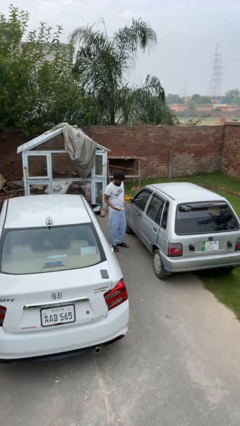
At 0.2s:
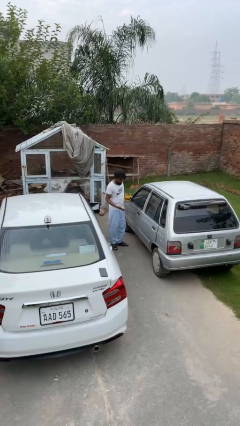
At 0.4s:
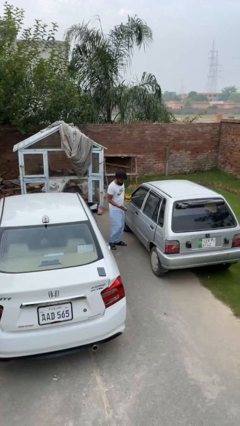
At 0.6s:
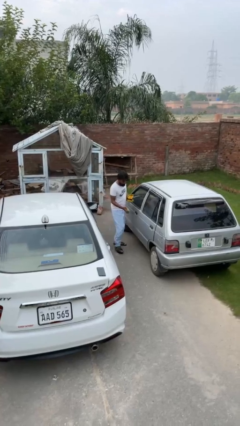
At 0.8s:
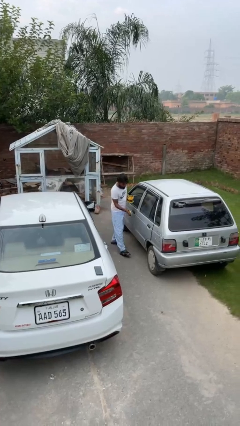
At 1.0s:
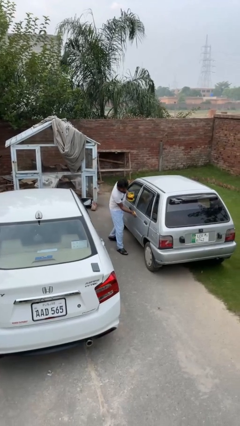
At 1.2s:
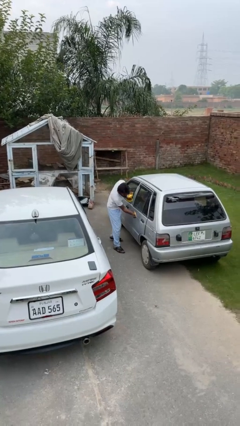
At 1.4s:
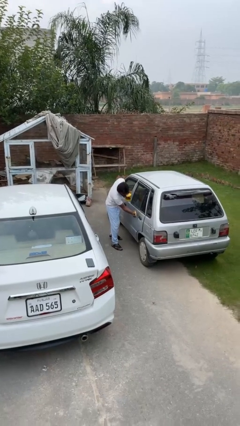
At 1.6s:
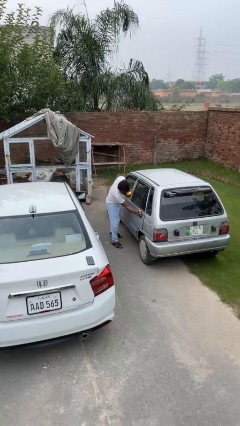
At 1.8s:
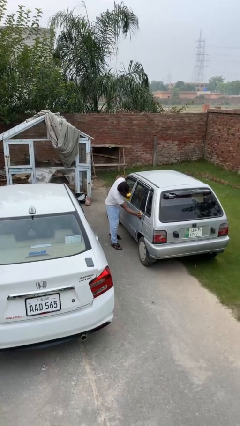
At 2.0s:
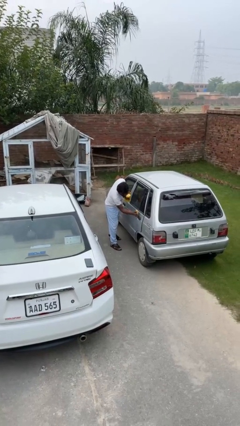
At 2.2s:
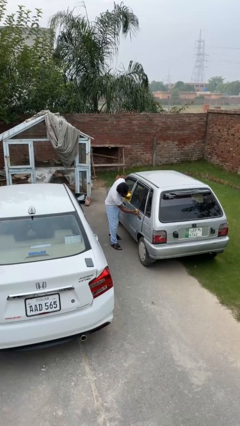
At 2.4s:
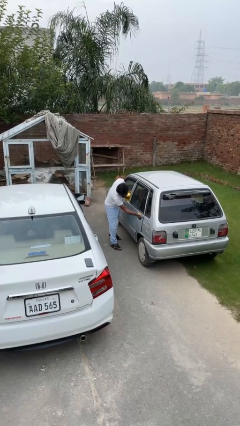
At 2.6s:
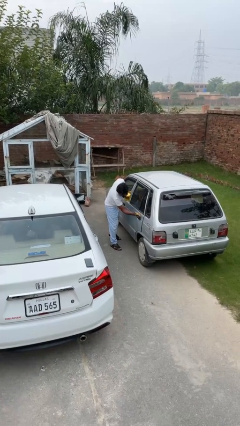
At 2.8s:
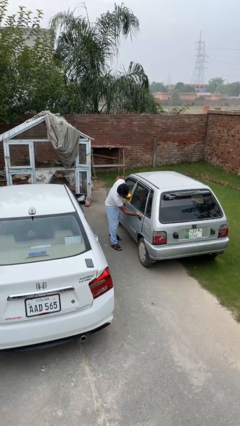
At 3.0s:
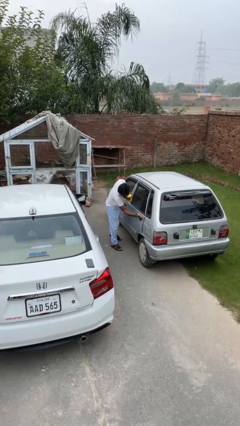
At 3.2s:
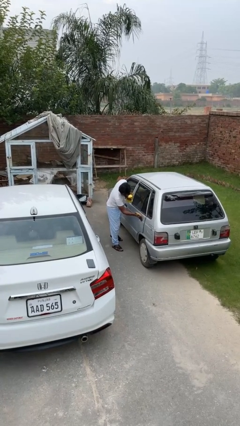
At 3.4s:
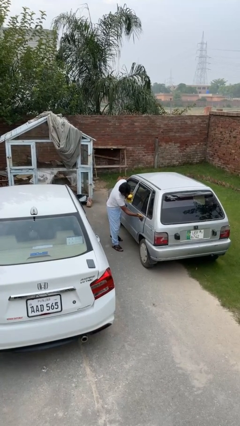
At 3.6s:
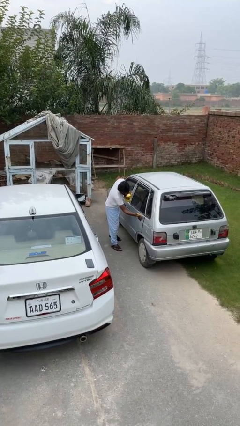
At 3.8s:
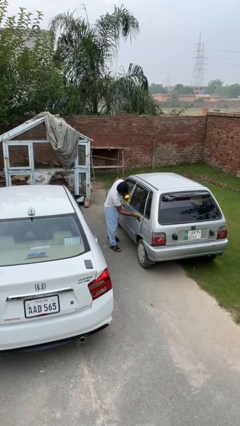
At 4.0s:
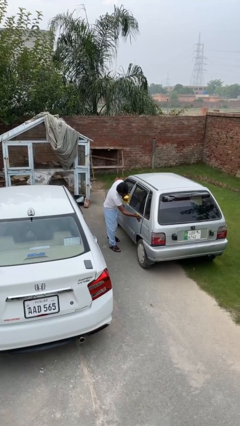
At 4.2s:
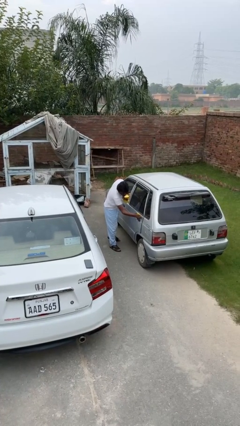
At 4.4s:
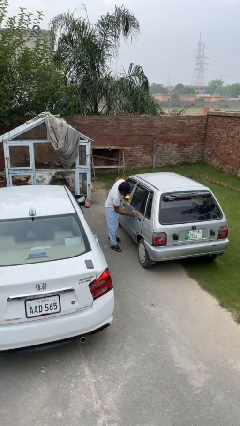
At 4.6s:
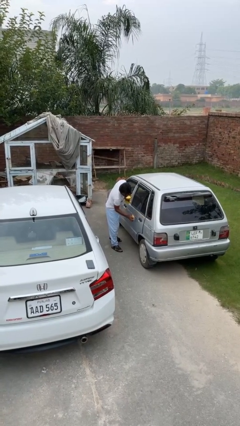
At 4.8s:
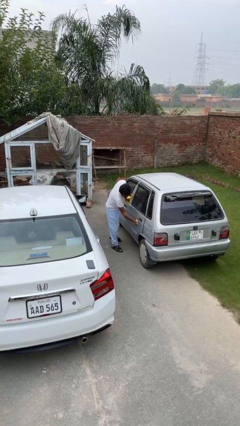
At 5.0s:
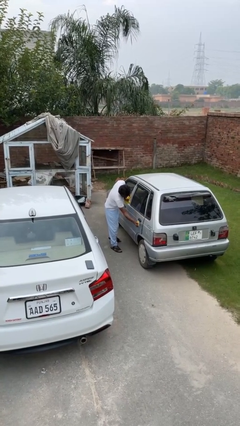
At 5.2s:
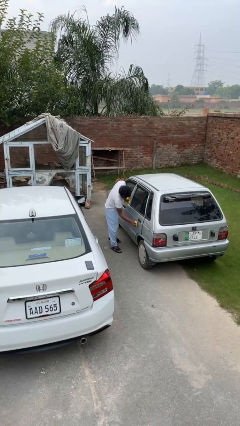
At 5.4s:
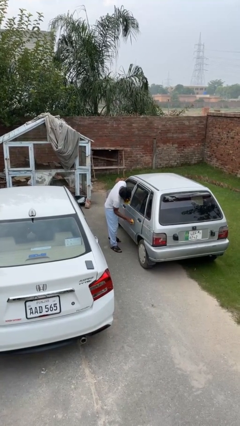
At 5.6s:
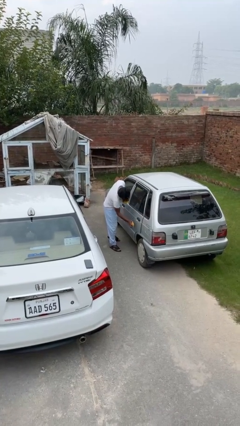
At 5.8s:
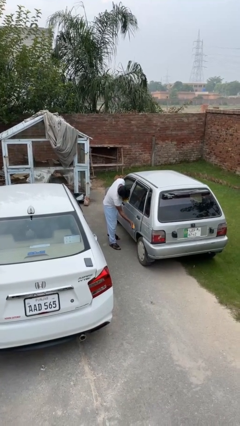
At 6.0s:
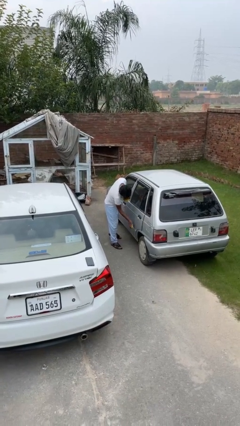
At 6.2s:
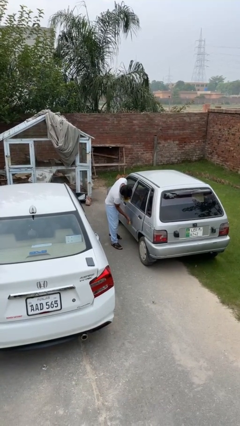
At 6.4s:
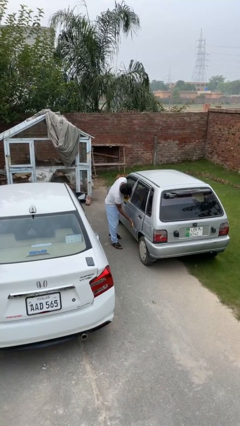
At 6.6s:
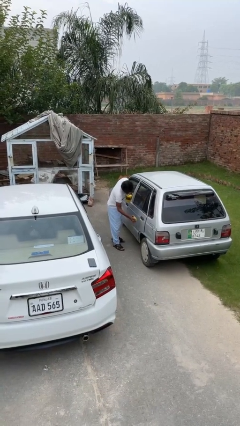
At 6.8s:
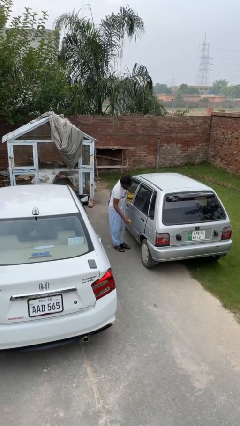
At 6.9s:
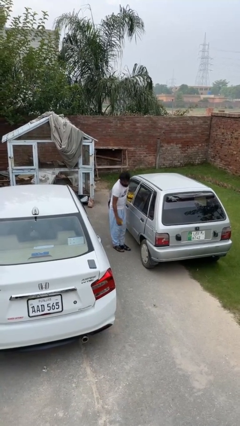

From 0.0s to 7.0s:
person polishes car with rag

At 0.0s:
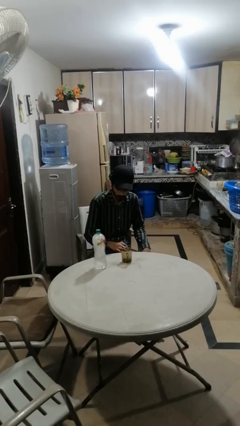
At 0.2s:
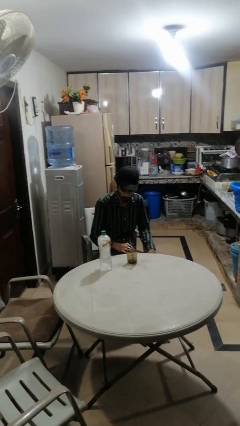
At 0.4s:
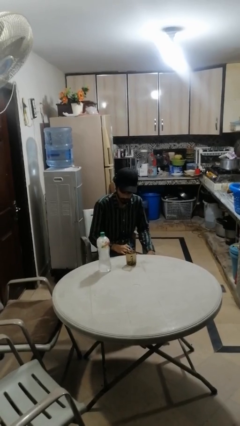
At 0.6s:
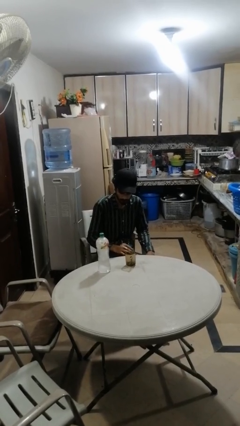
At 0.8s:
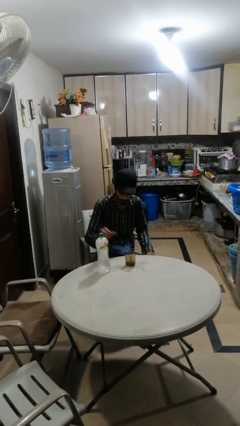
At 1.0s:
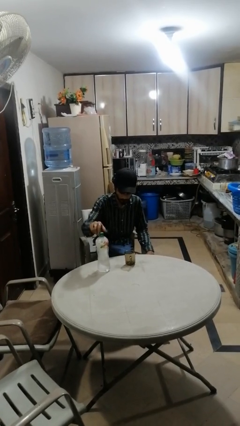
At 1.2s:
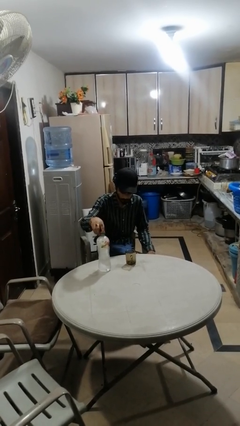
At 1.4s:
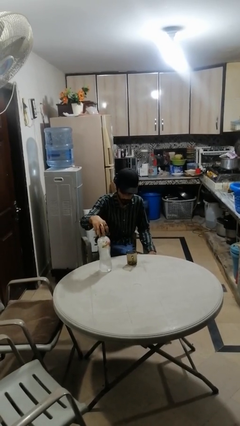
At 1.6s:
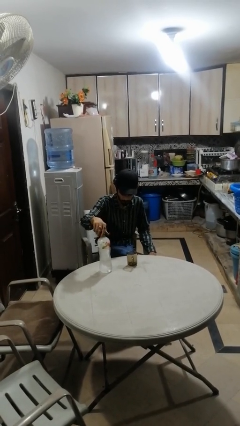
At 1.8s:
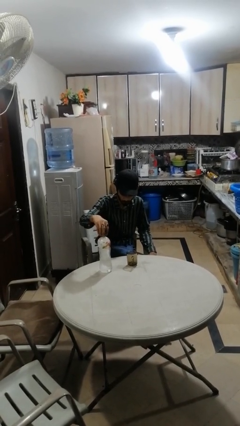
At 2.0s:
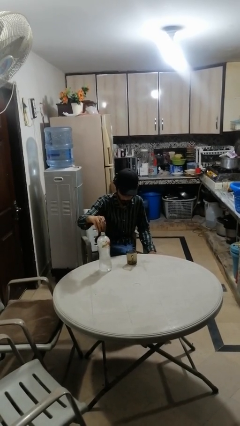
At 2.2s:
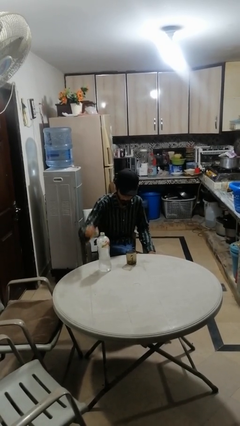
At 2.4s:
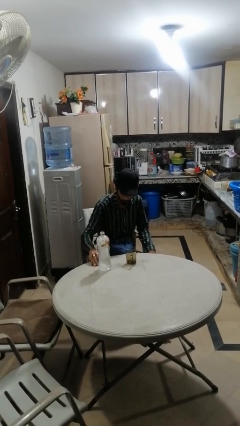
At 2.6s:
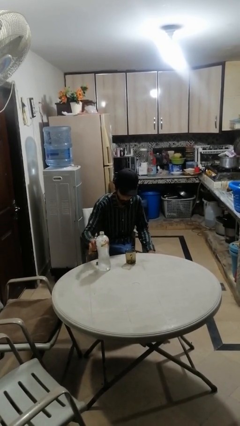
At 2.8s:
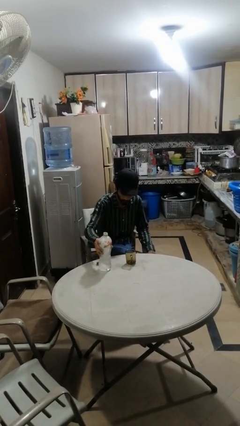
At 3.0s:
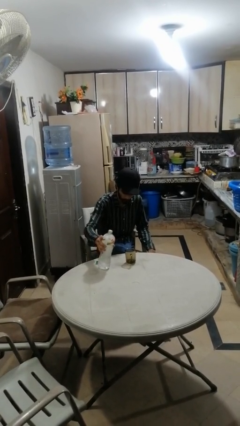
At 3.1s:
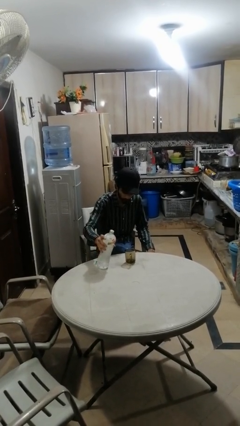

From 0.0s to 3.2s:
person unscrews lid from bottle

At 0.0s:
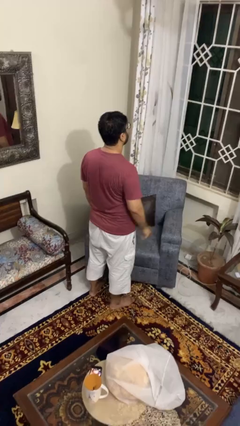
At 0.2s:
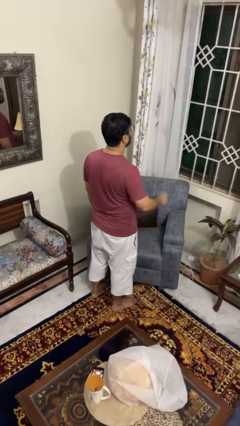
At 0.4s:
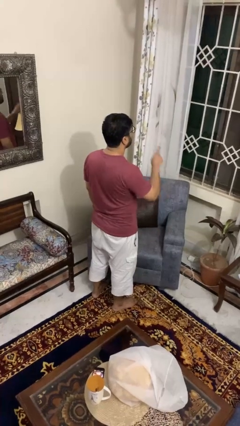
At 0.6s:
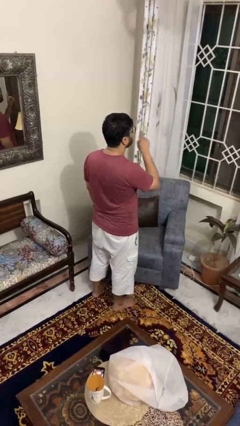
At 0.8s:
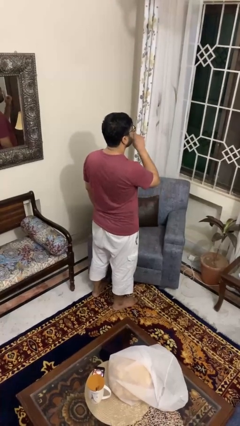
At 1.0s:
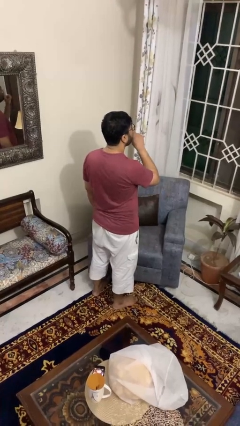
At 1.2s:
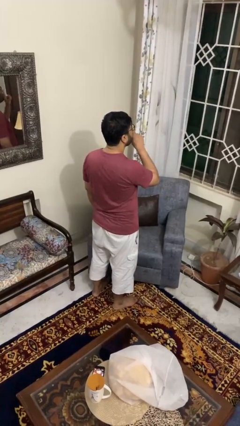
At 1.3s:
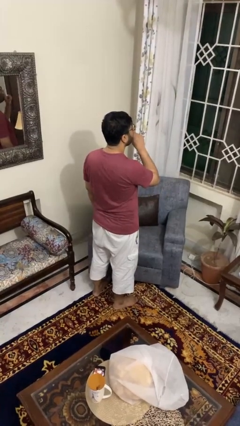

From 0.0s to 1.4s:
person gestures be quiet

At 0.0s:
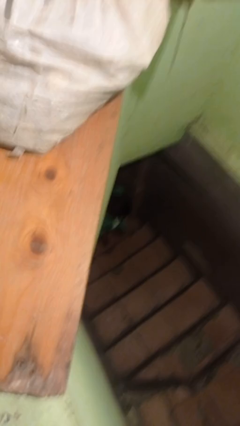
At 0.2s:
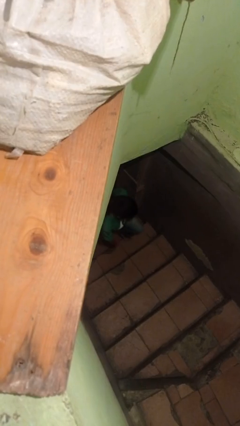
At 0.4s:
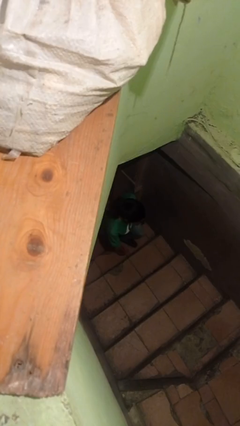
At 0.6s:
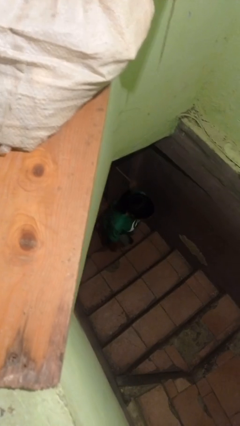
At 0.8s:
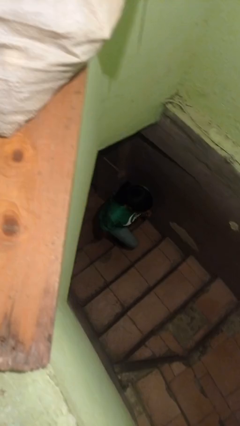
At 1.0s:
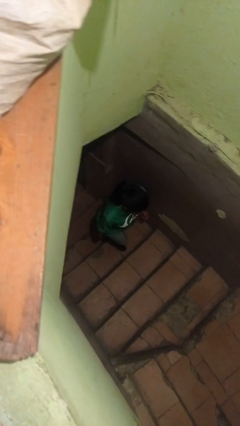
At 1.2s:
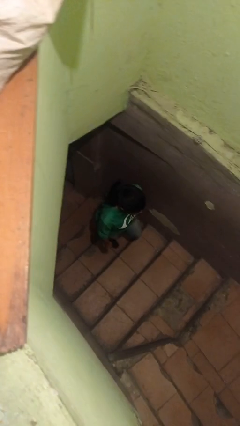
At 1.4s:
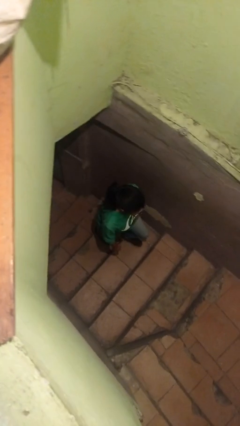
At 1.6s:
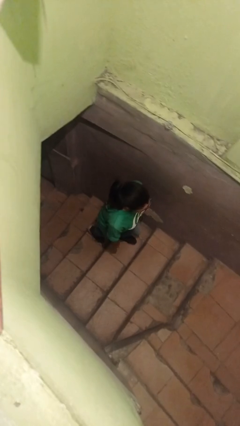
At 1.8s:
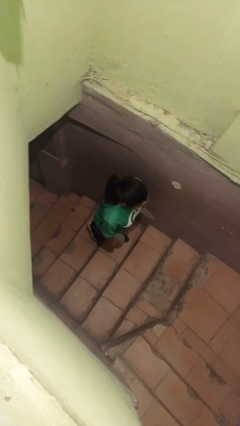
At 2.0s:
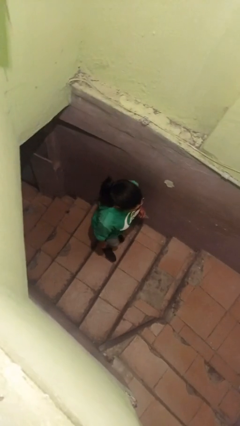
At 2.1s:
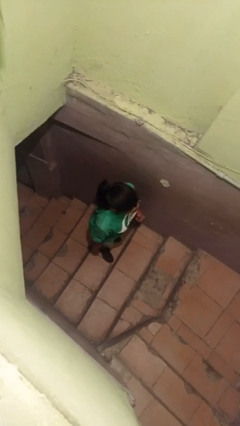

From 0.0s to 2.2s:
person climbs up stairs

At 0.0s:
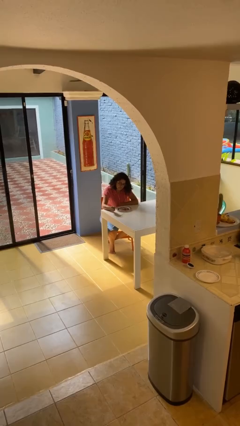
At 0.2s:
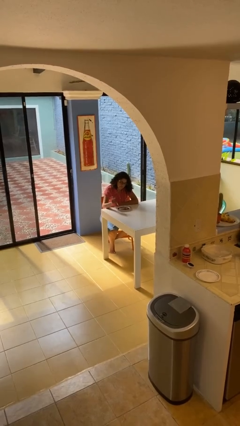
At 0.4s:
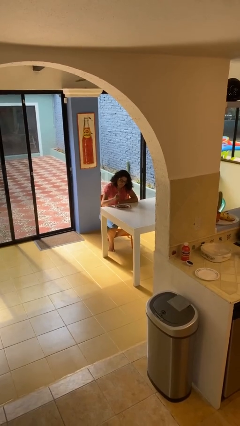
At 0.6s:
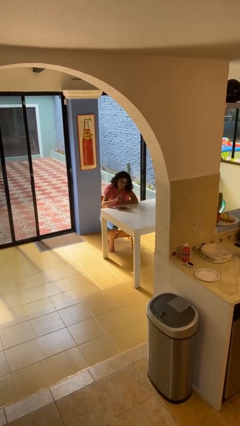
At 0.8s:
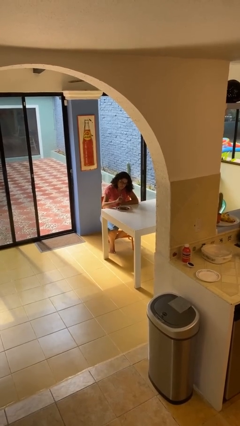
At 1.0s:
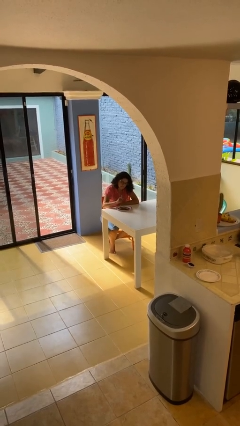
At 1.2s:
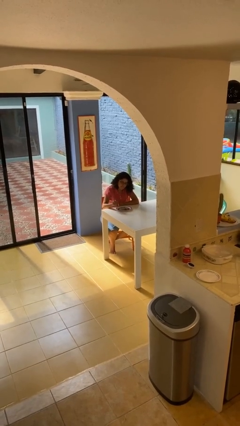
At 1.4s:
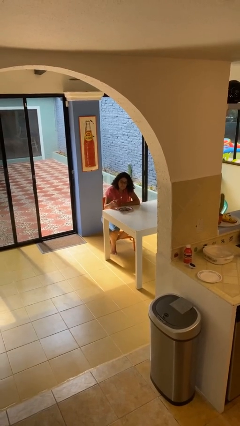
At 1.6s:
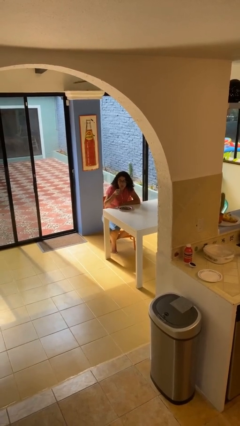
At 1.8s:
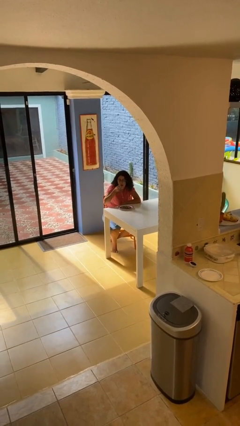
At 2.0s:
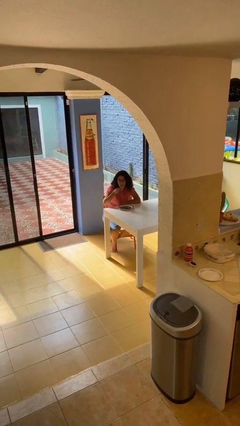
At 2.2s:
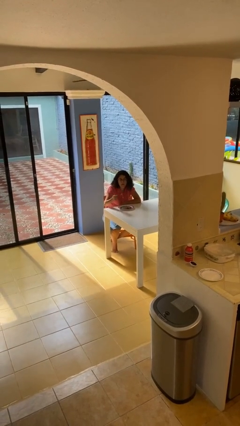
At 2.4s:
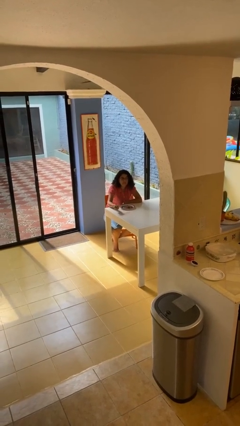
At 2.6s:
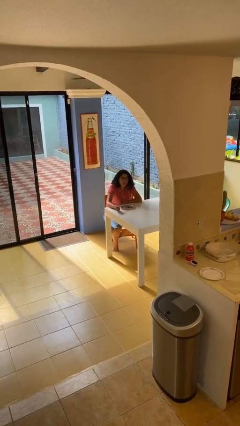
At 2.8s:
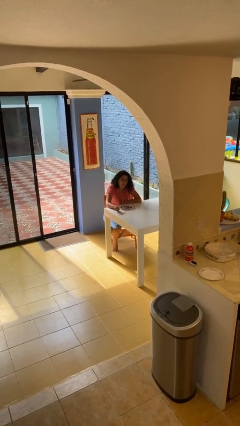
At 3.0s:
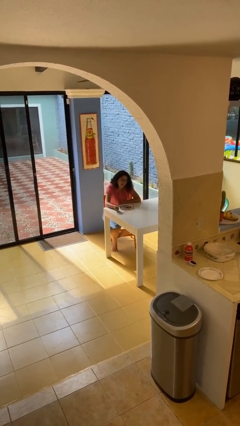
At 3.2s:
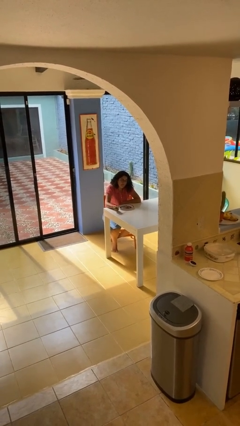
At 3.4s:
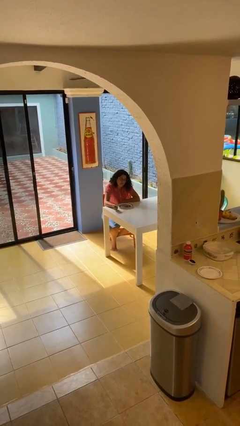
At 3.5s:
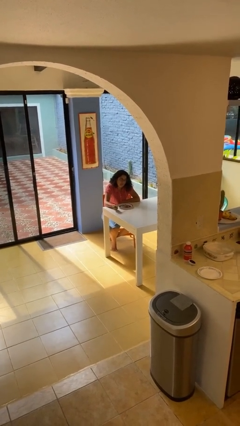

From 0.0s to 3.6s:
person eats with utensil
